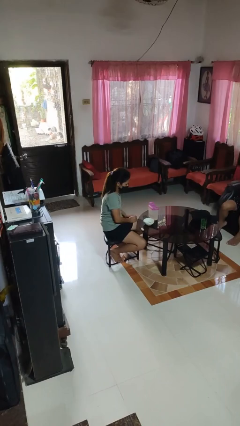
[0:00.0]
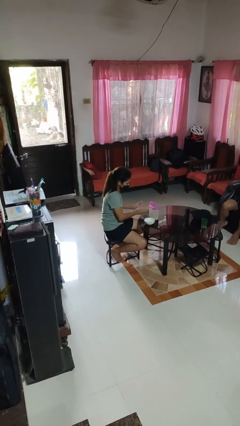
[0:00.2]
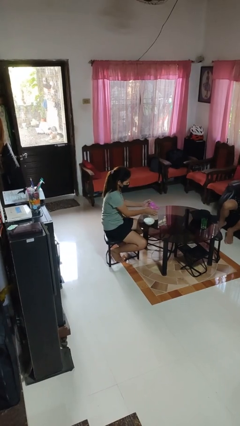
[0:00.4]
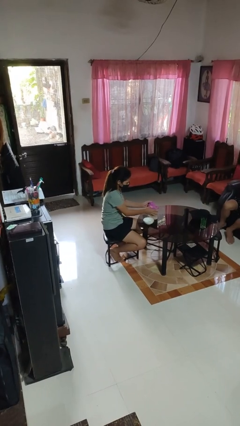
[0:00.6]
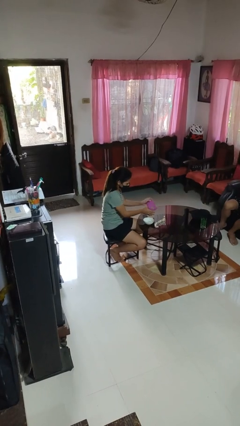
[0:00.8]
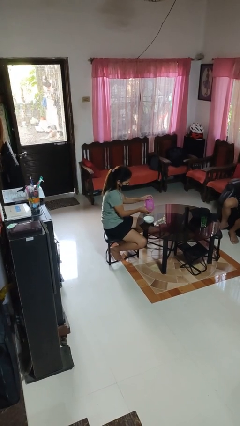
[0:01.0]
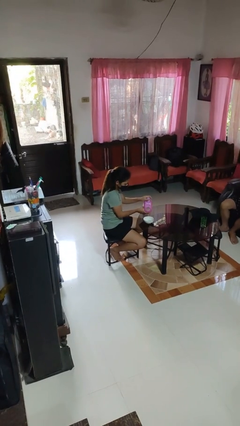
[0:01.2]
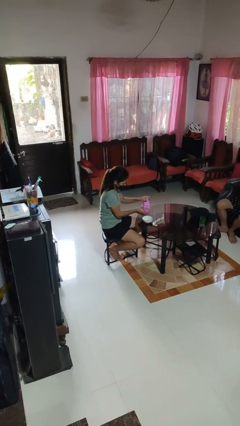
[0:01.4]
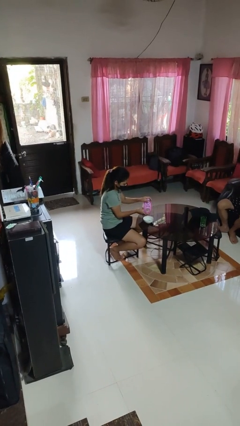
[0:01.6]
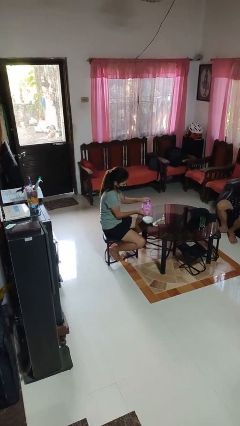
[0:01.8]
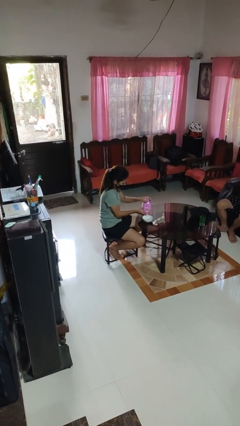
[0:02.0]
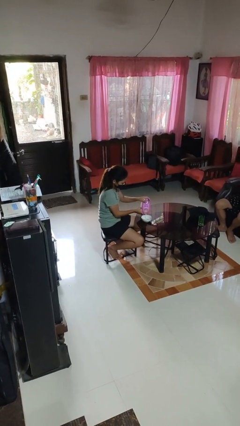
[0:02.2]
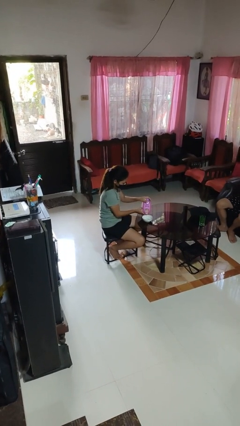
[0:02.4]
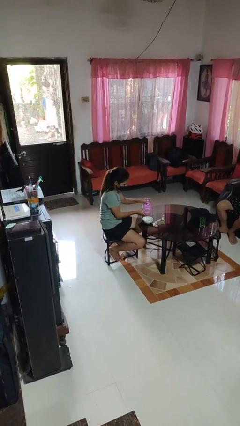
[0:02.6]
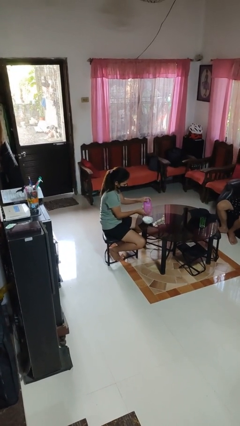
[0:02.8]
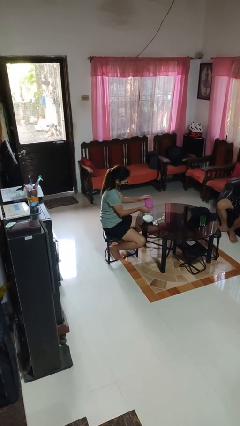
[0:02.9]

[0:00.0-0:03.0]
person pours into bowl

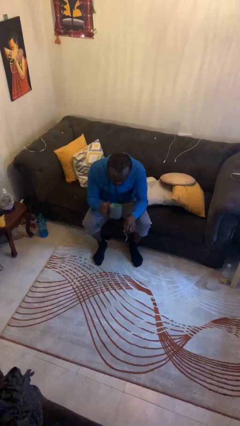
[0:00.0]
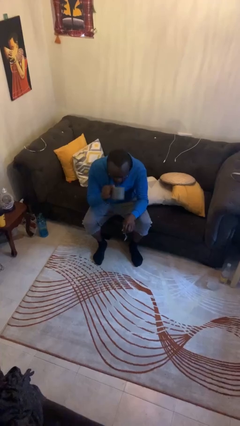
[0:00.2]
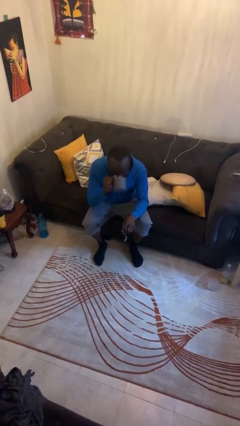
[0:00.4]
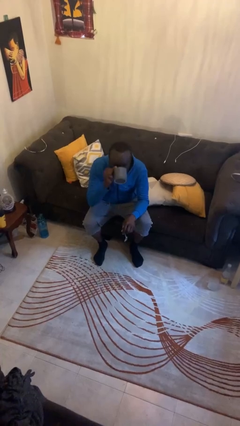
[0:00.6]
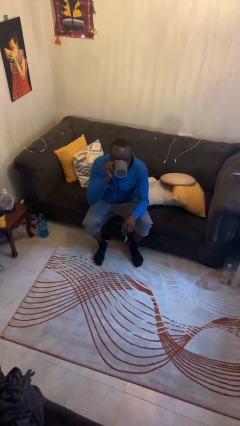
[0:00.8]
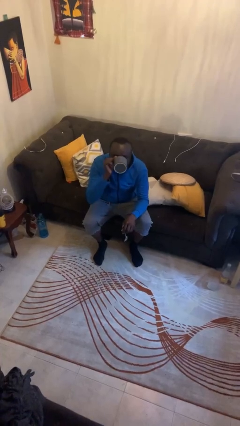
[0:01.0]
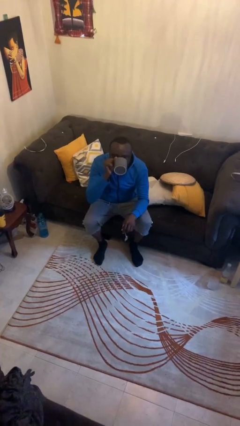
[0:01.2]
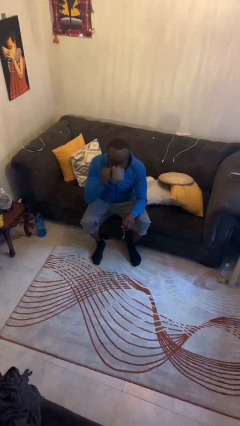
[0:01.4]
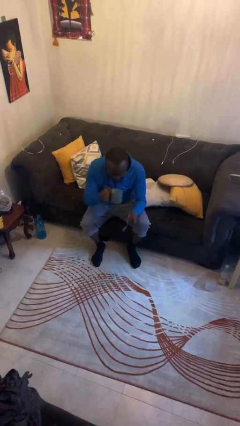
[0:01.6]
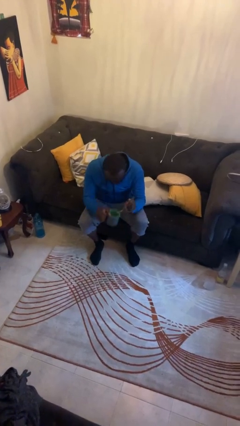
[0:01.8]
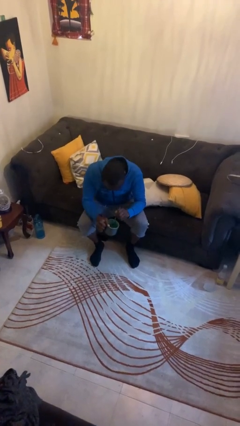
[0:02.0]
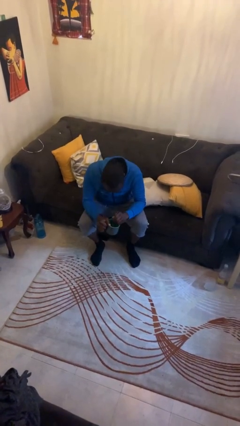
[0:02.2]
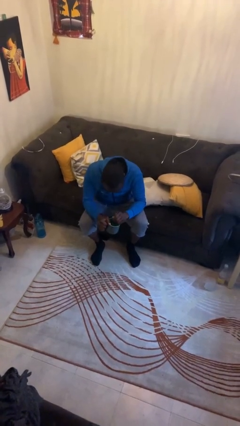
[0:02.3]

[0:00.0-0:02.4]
person drinks from mug

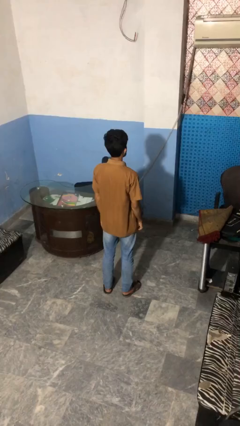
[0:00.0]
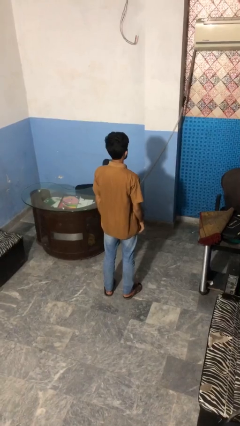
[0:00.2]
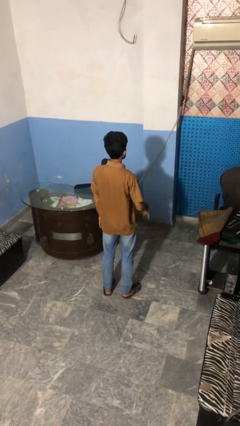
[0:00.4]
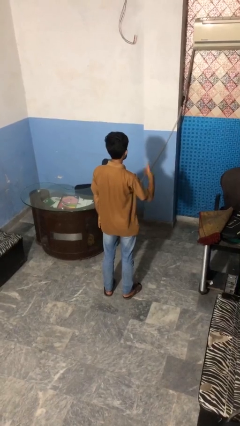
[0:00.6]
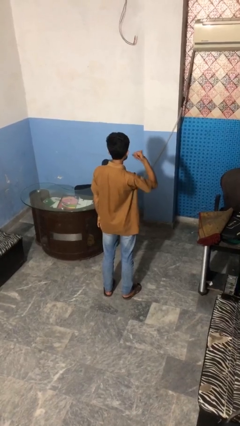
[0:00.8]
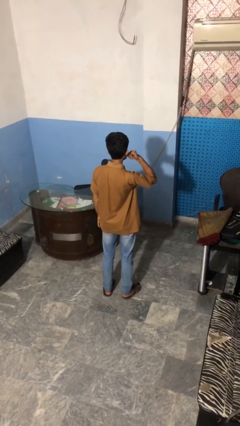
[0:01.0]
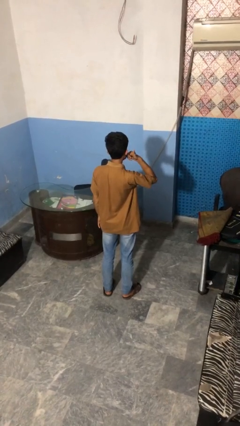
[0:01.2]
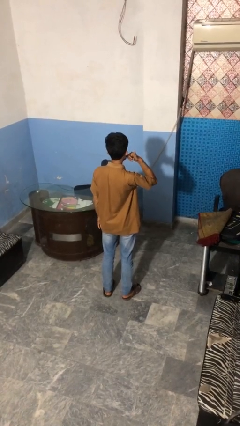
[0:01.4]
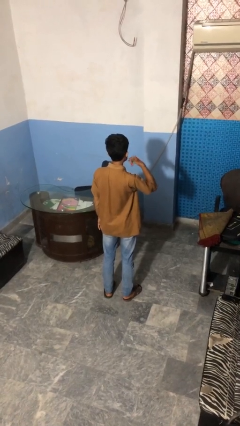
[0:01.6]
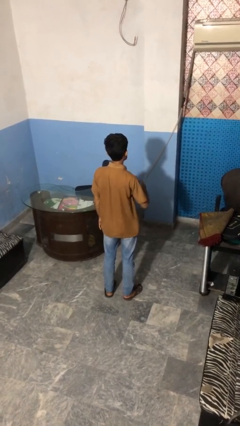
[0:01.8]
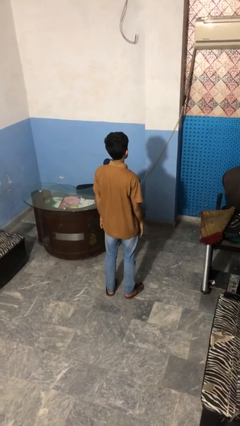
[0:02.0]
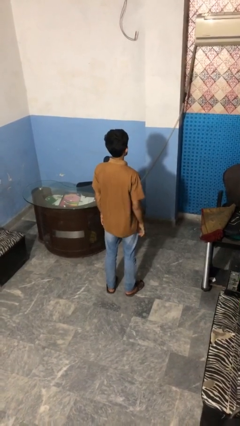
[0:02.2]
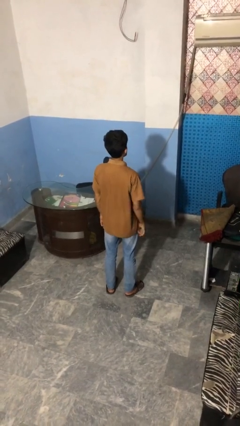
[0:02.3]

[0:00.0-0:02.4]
person gestures call me

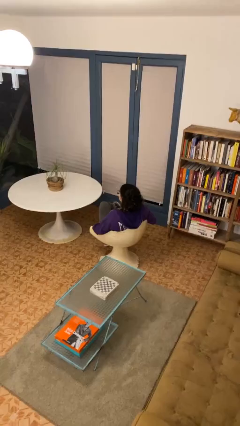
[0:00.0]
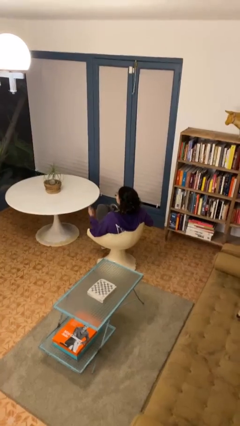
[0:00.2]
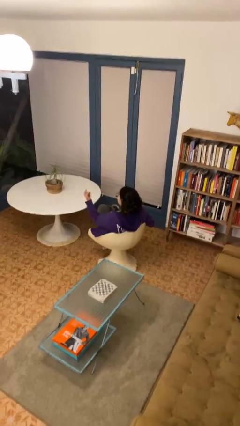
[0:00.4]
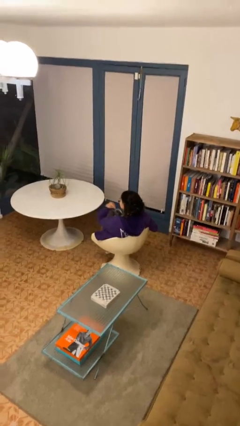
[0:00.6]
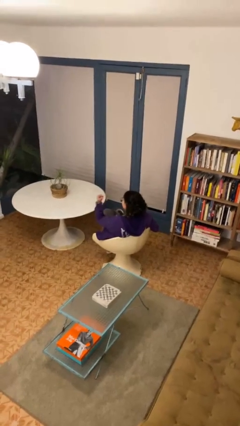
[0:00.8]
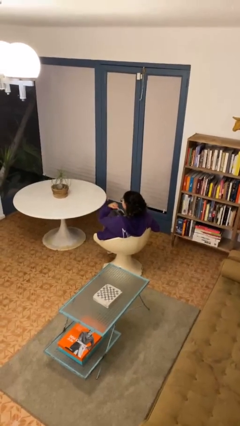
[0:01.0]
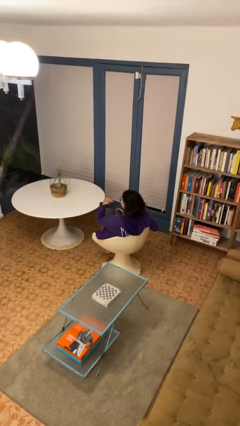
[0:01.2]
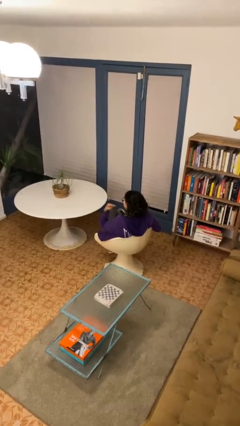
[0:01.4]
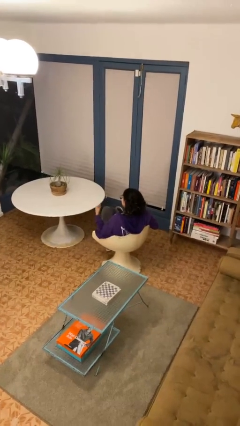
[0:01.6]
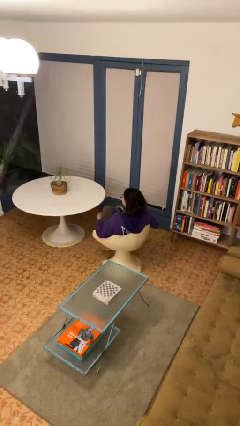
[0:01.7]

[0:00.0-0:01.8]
person gestures behind me

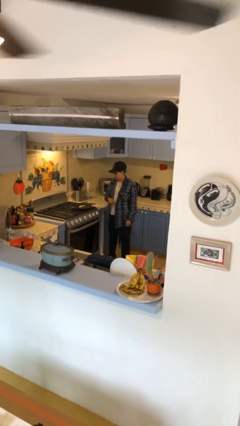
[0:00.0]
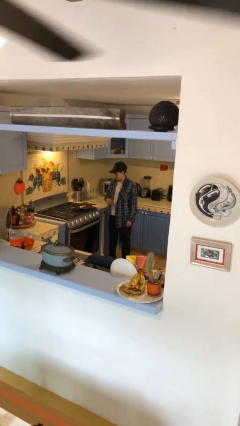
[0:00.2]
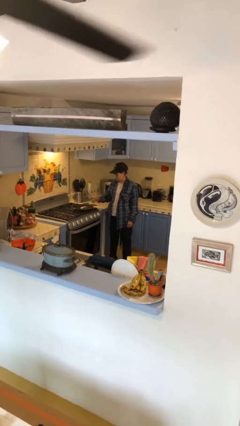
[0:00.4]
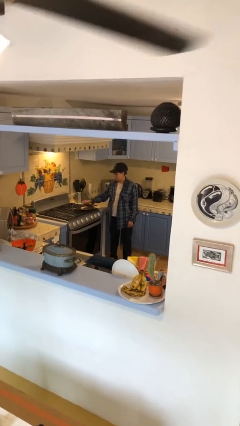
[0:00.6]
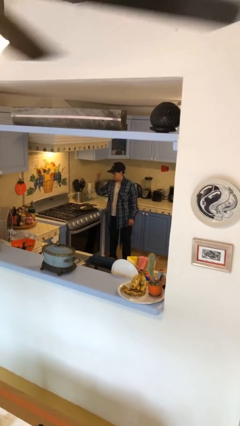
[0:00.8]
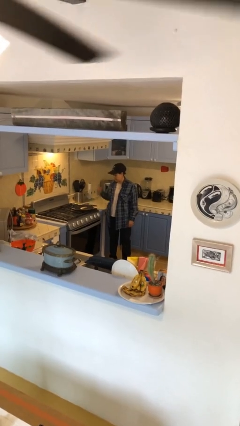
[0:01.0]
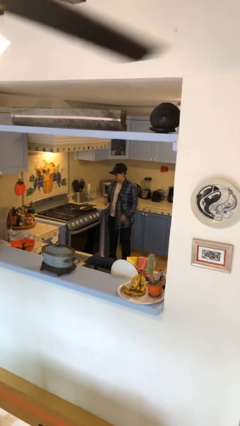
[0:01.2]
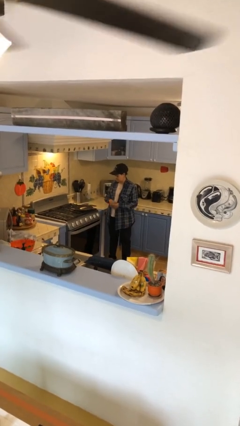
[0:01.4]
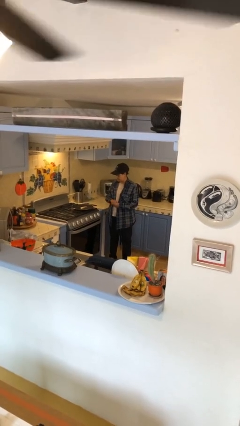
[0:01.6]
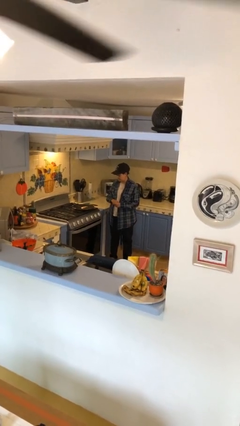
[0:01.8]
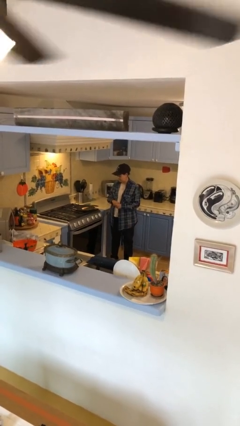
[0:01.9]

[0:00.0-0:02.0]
person burns hand

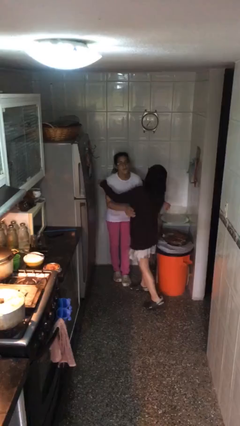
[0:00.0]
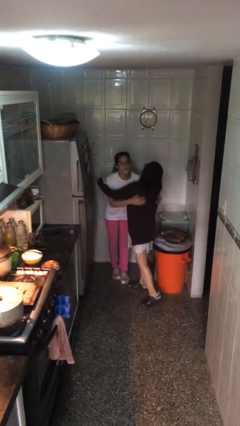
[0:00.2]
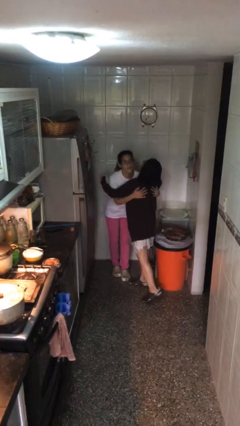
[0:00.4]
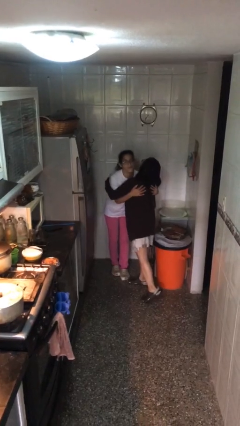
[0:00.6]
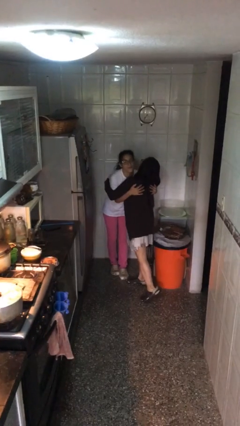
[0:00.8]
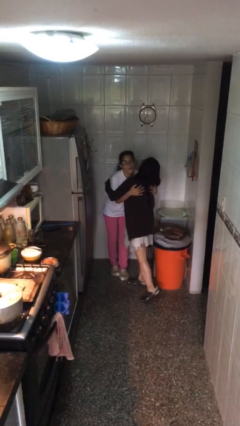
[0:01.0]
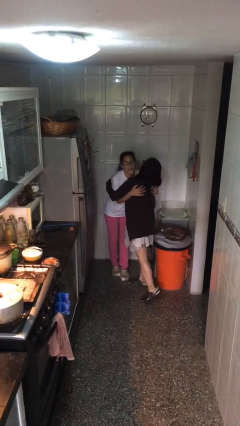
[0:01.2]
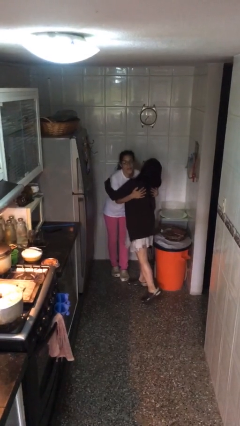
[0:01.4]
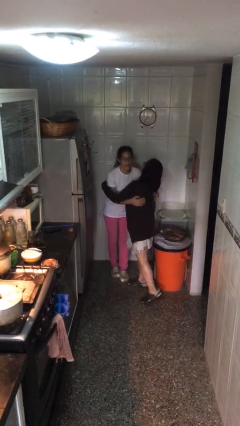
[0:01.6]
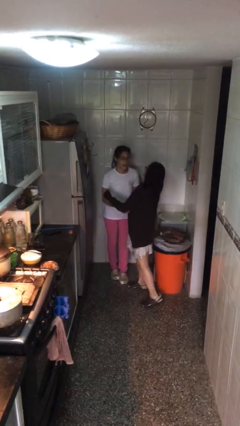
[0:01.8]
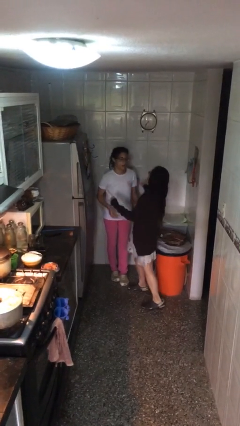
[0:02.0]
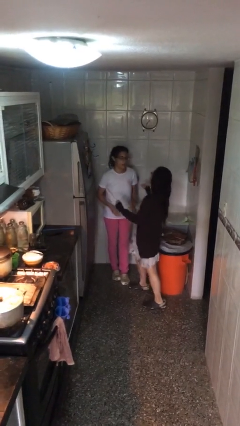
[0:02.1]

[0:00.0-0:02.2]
person embraces person

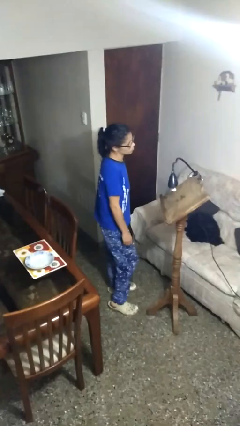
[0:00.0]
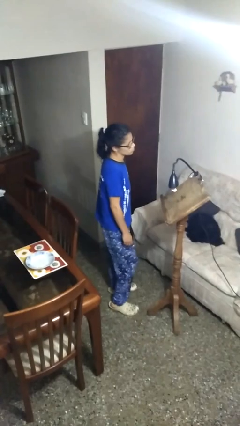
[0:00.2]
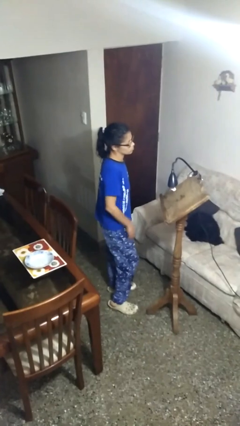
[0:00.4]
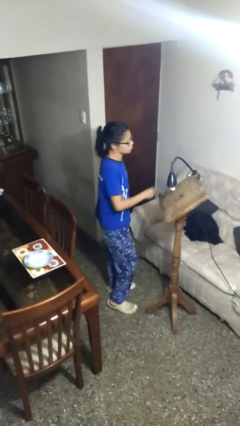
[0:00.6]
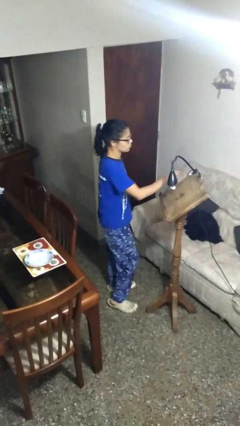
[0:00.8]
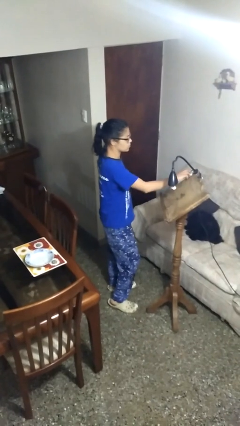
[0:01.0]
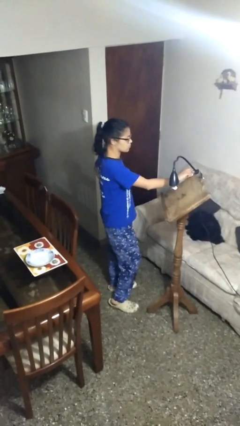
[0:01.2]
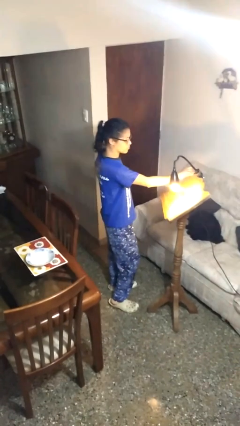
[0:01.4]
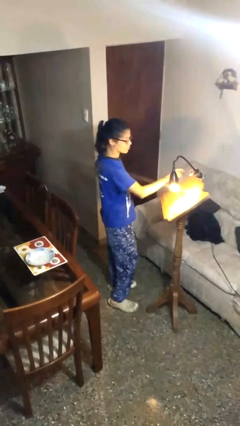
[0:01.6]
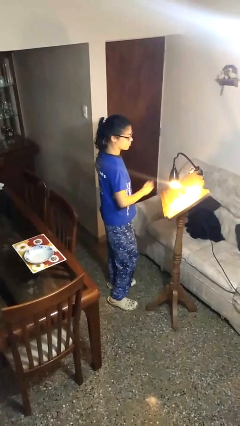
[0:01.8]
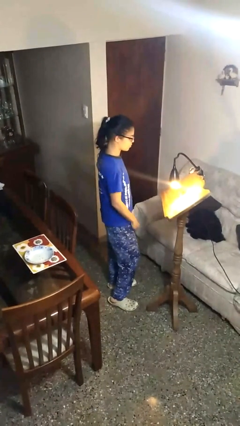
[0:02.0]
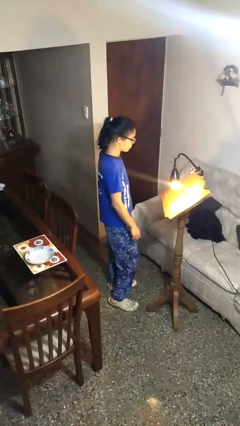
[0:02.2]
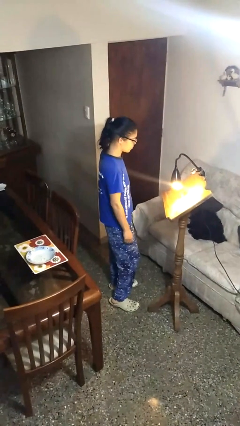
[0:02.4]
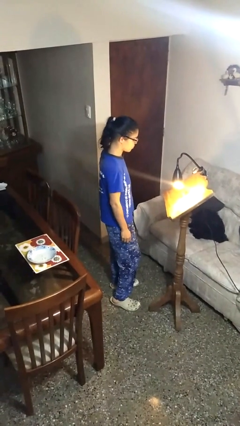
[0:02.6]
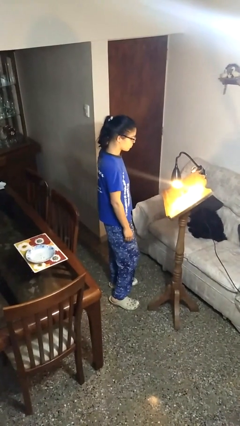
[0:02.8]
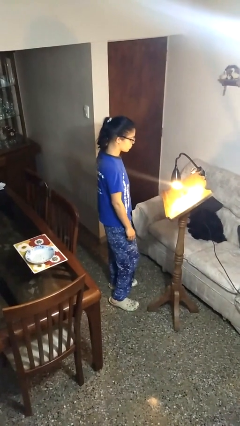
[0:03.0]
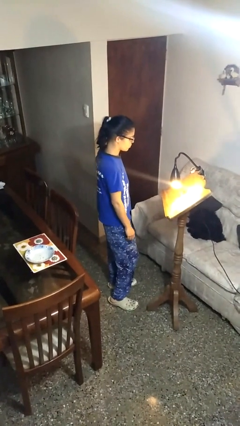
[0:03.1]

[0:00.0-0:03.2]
person turns on lamp

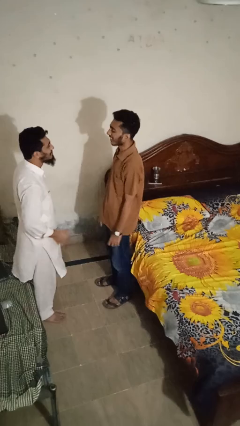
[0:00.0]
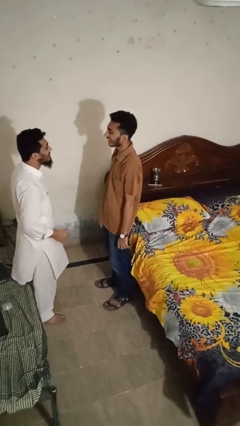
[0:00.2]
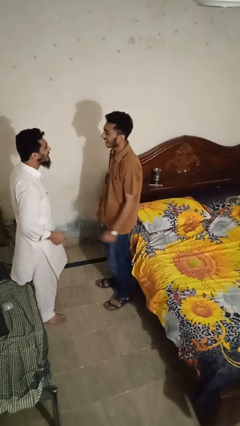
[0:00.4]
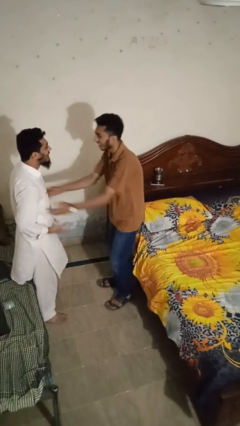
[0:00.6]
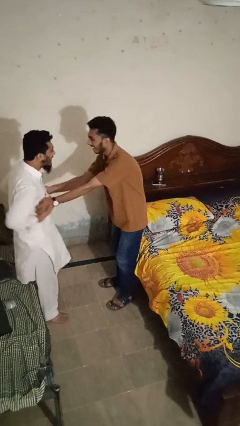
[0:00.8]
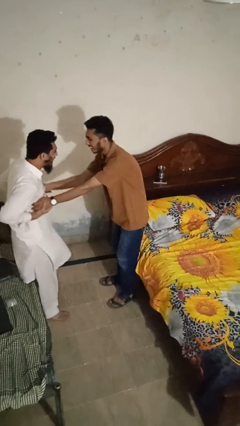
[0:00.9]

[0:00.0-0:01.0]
person tickles person